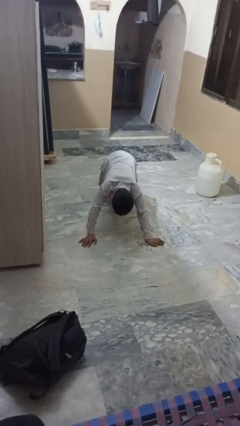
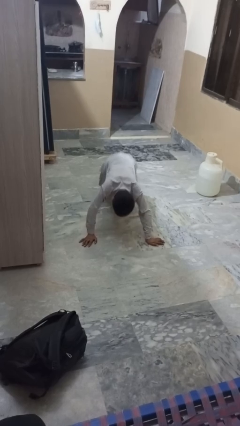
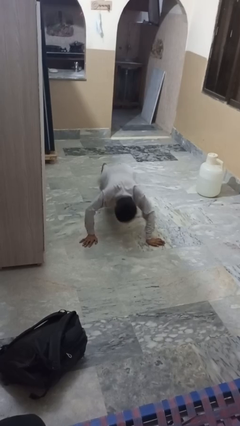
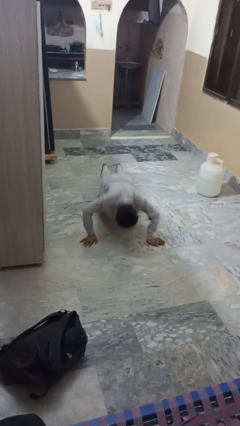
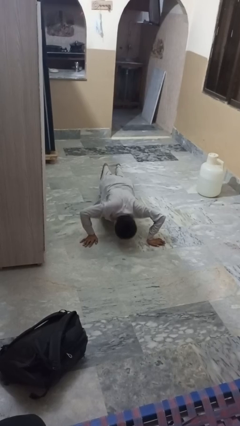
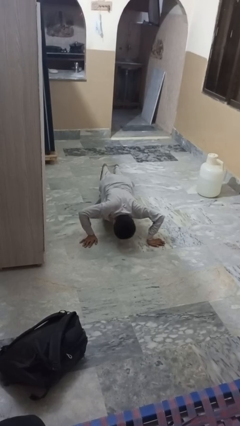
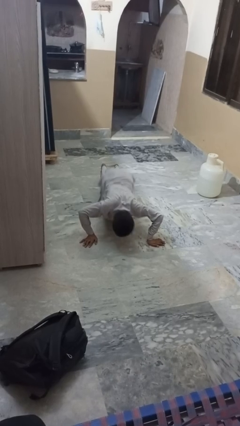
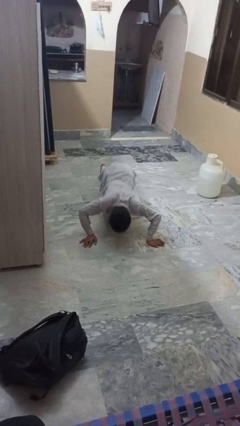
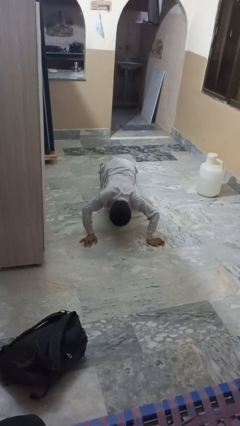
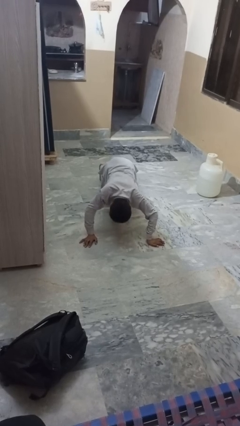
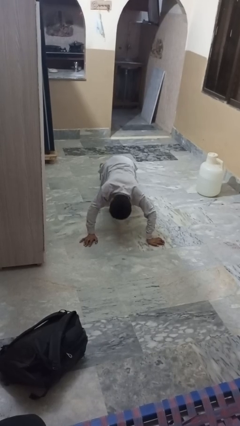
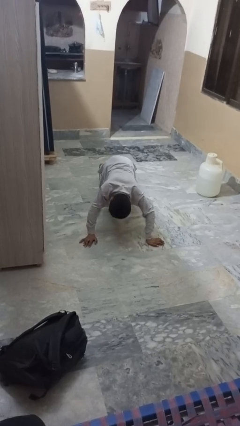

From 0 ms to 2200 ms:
person exercises with pushup

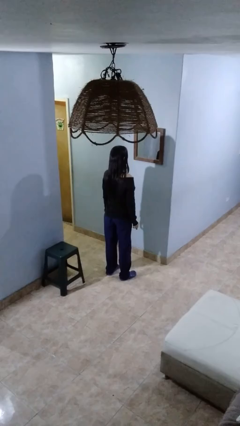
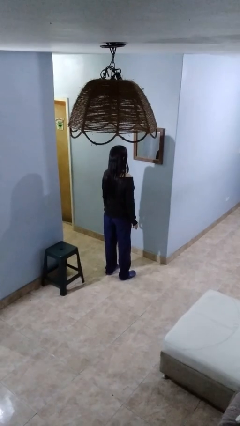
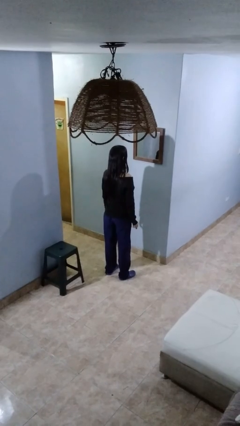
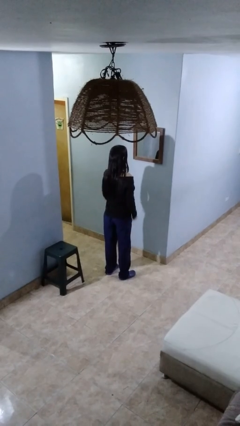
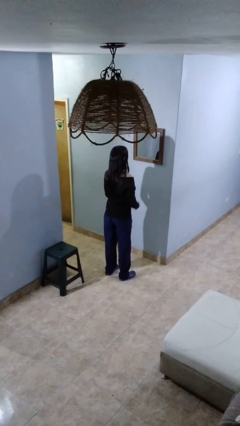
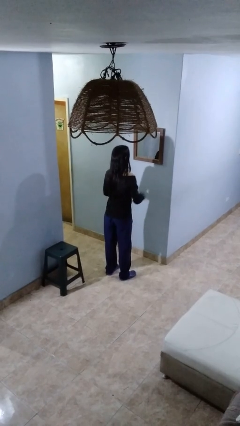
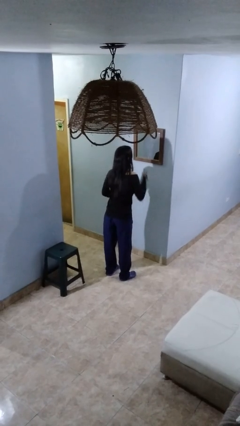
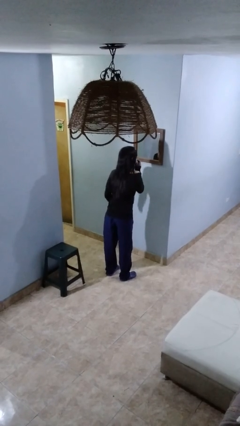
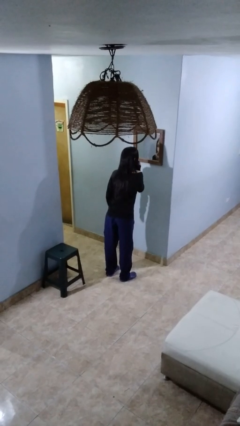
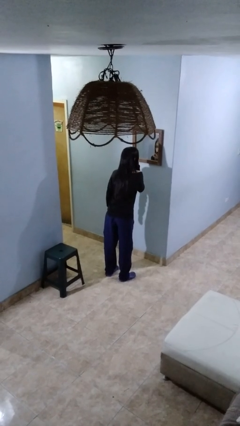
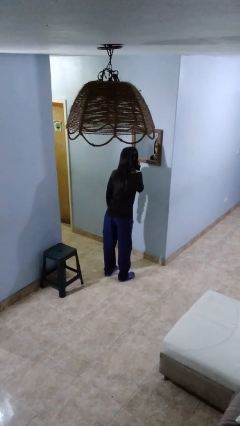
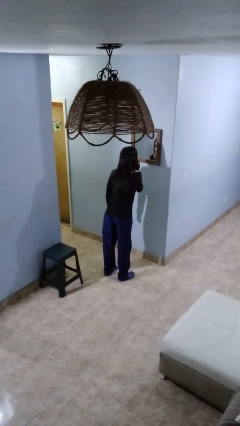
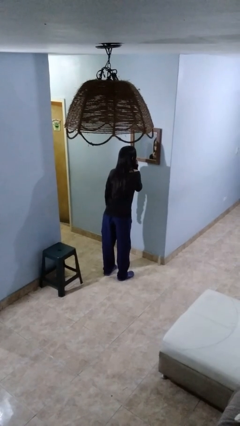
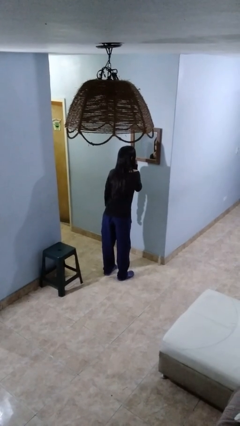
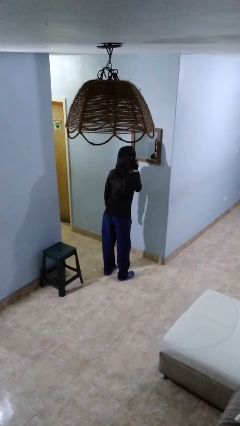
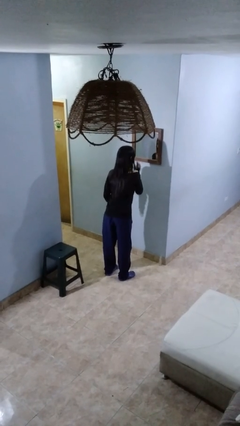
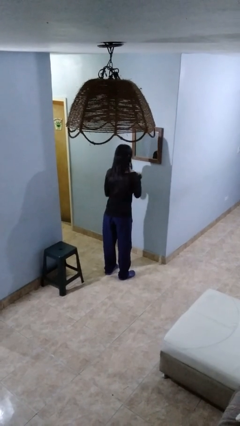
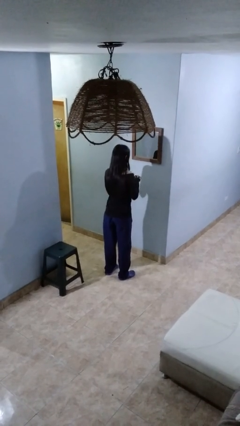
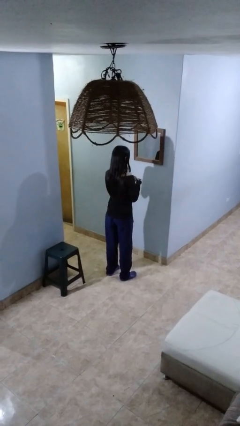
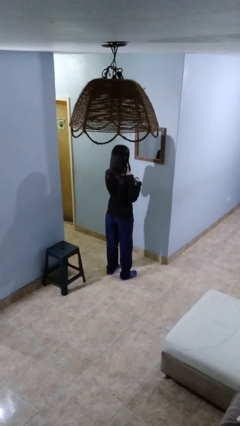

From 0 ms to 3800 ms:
person applies lip makeup

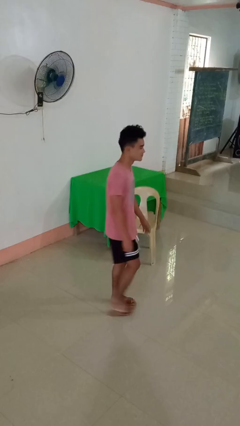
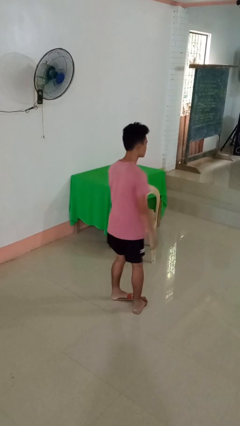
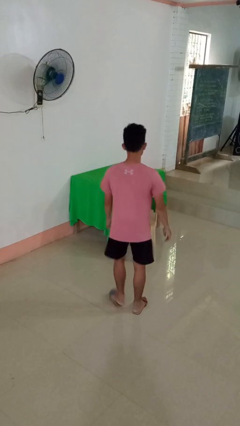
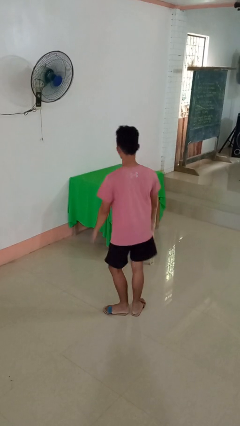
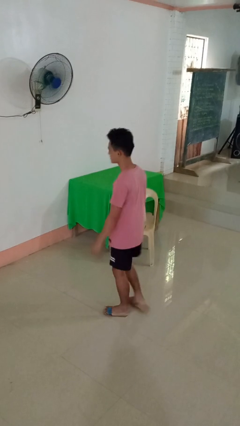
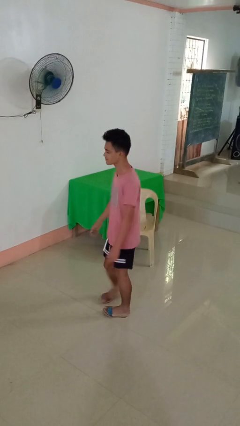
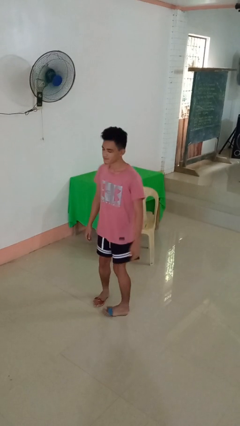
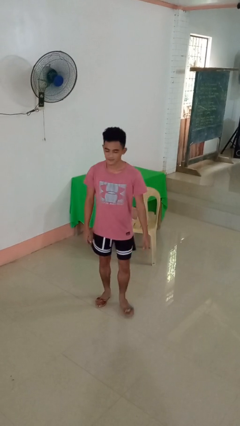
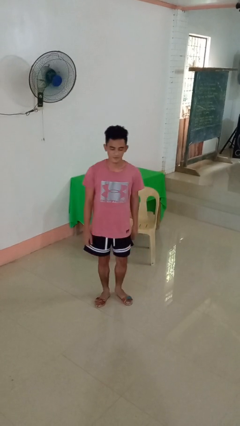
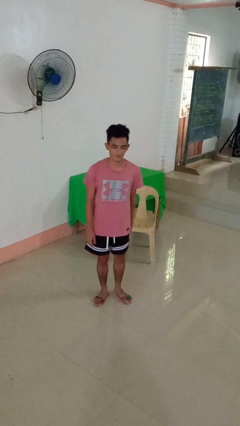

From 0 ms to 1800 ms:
person twirls

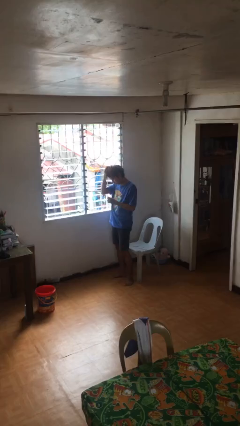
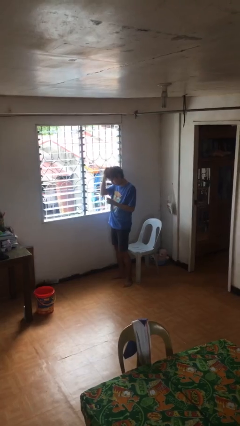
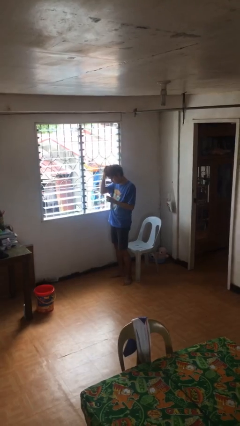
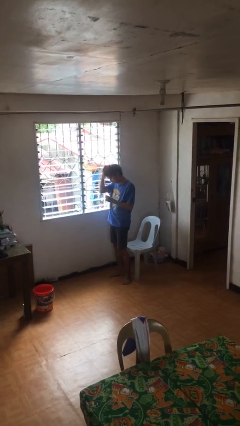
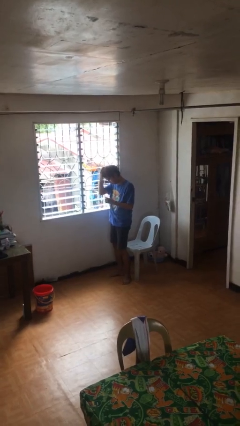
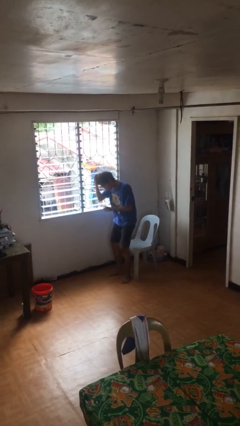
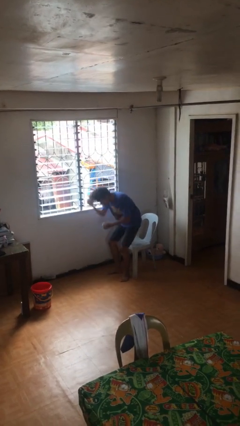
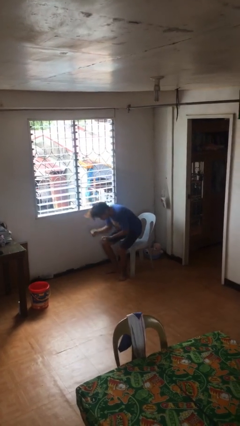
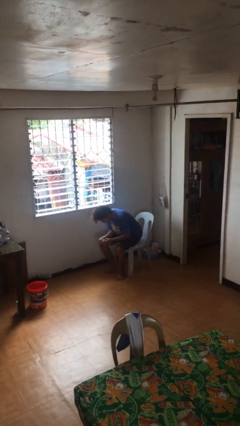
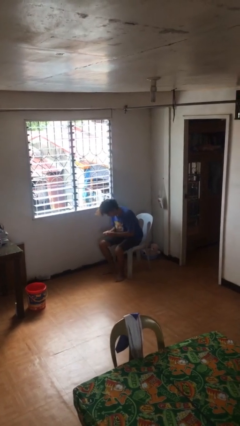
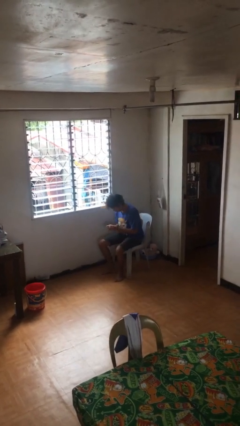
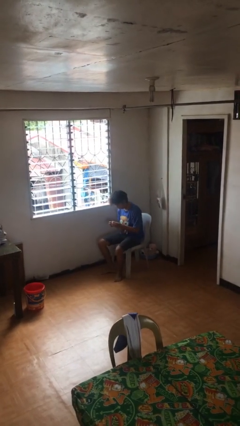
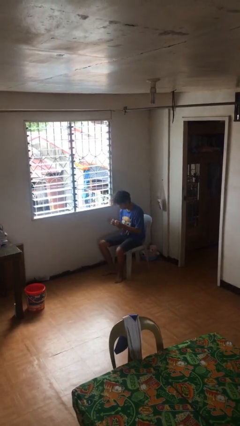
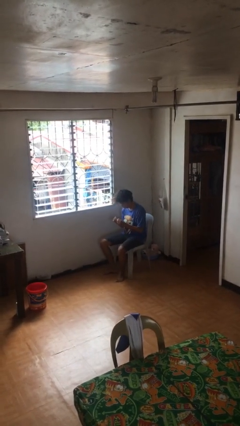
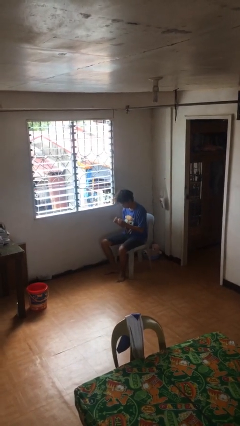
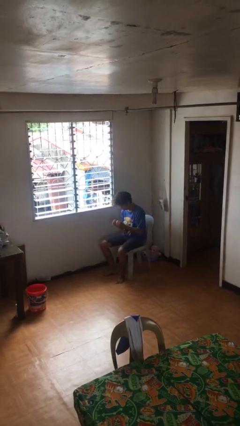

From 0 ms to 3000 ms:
person sits down

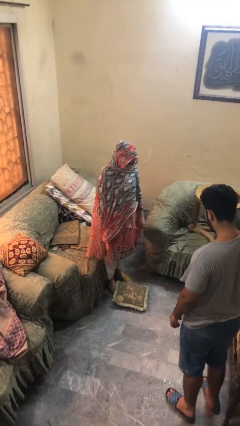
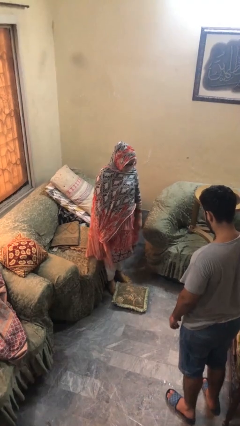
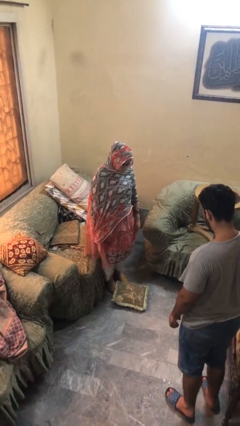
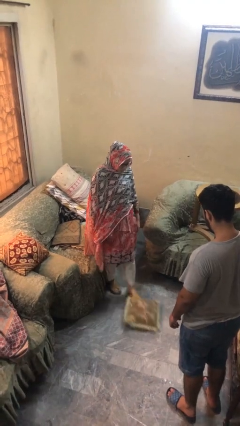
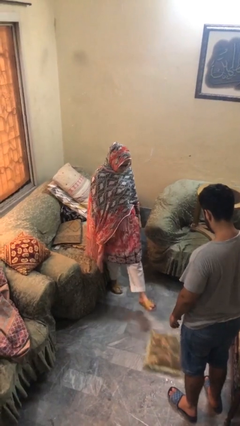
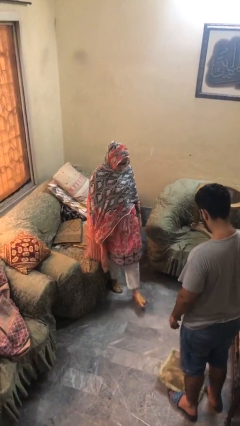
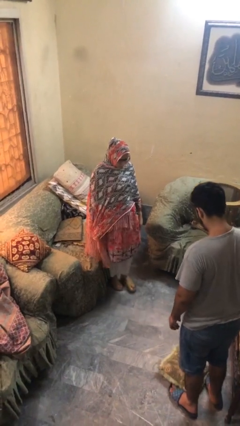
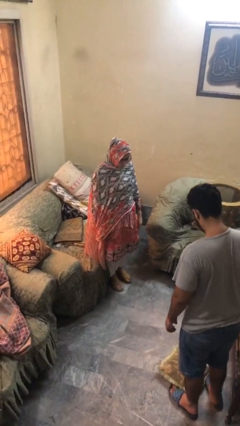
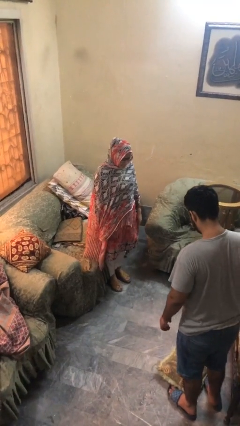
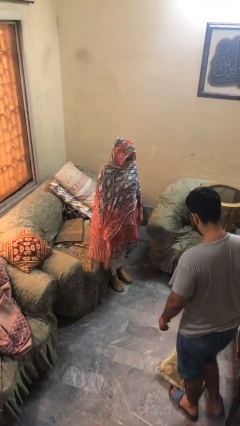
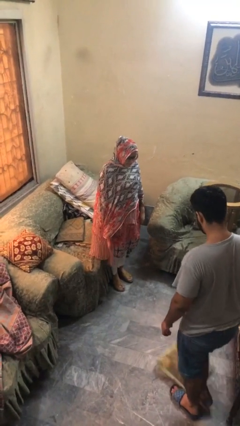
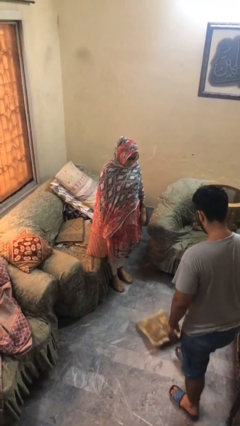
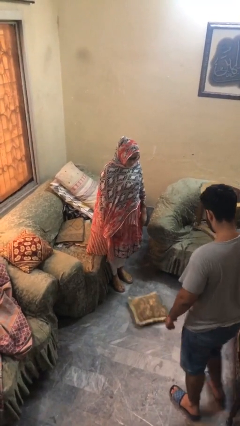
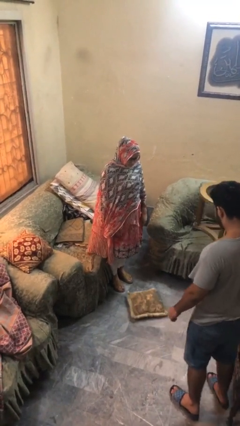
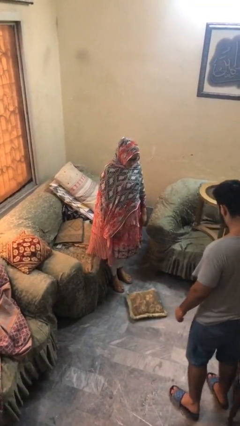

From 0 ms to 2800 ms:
person kicks object to person

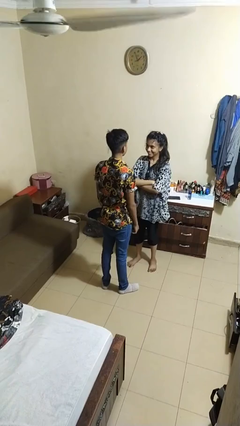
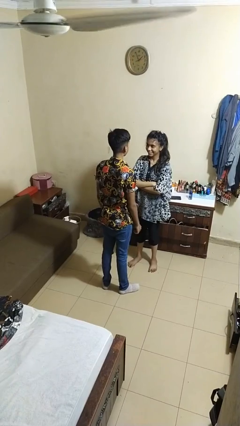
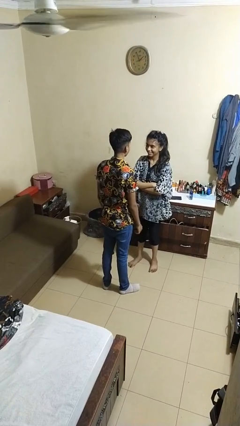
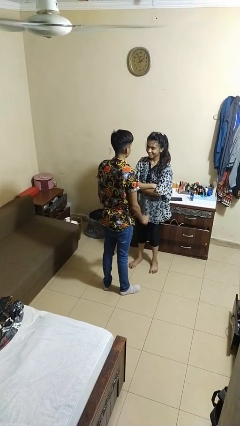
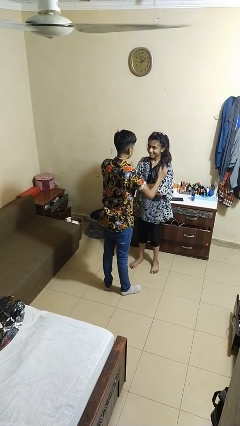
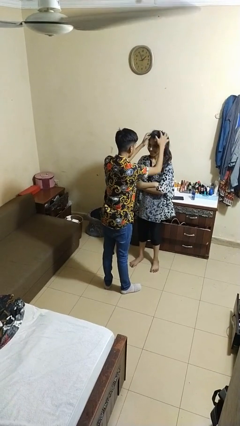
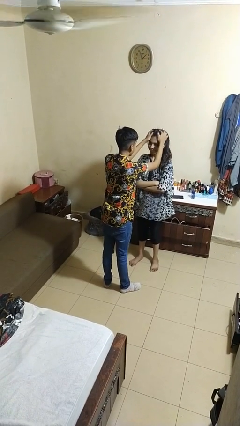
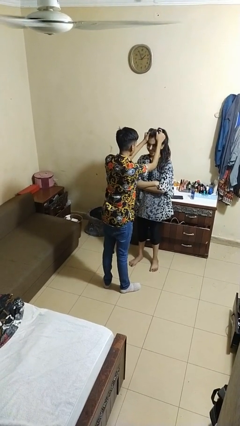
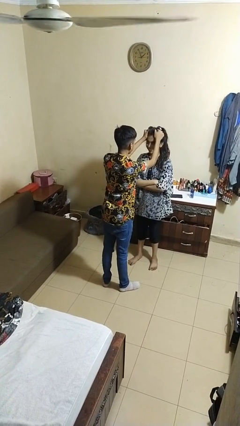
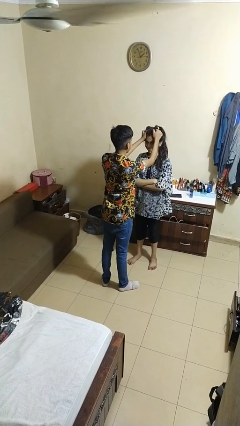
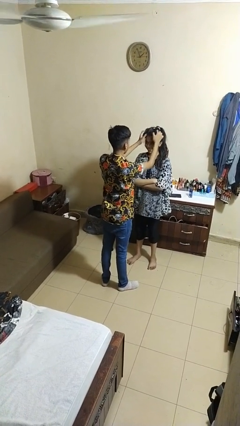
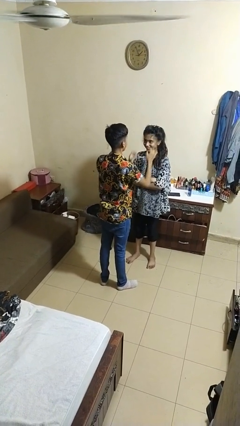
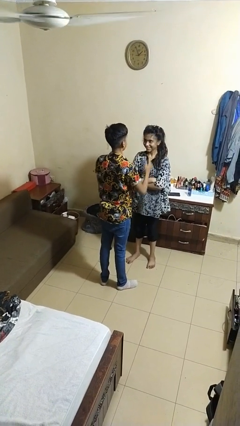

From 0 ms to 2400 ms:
person grabs person by hair

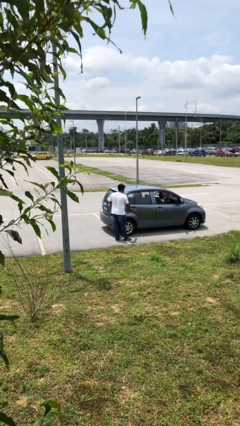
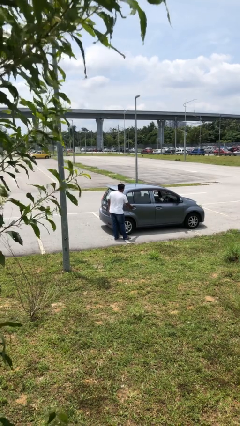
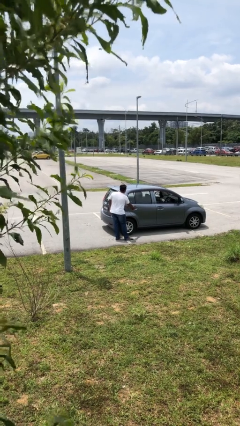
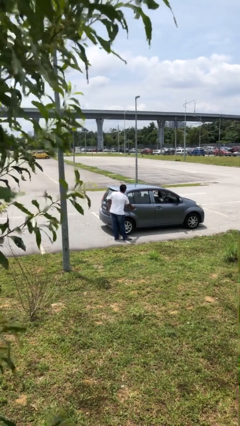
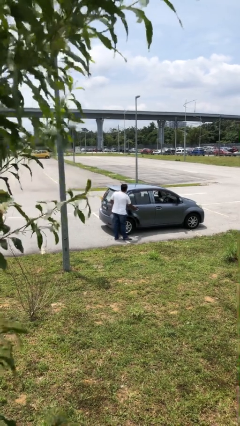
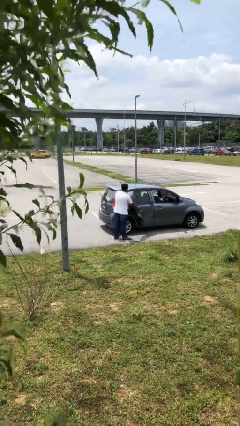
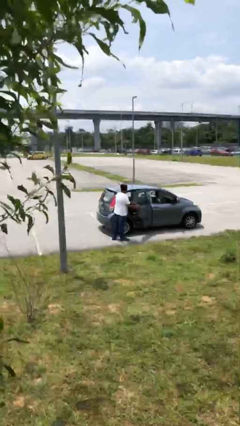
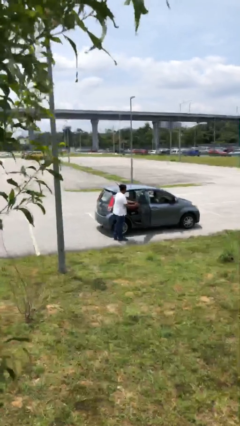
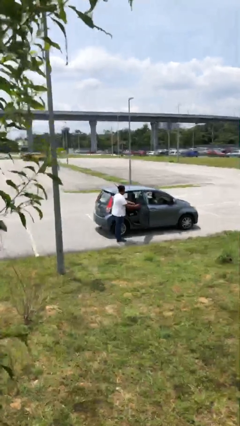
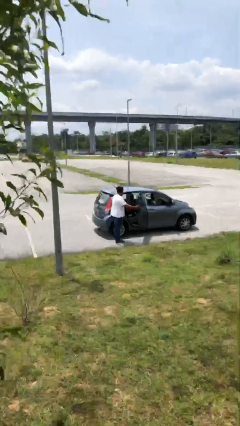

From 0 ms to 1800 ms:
person opens car door
